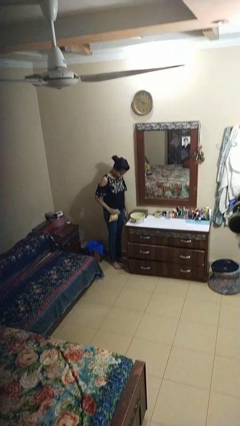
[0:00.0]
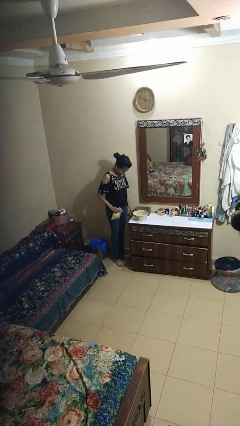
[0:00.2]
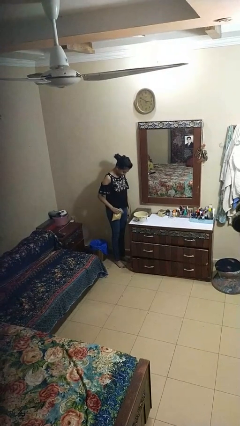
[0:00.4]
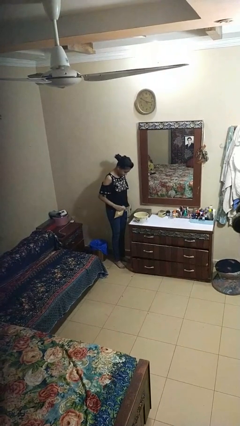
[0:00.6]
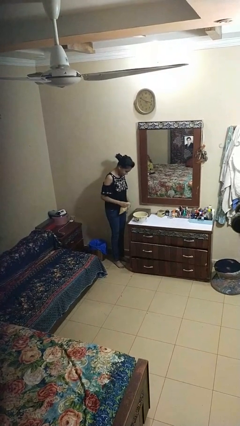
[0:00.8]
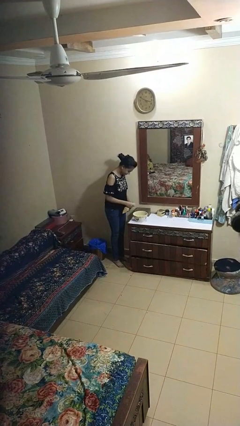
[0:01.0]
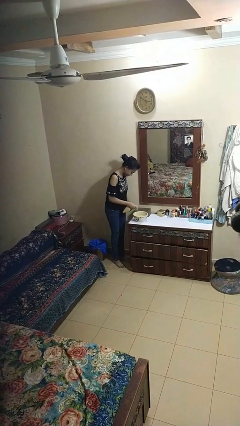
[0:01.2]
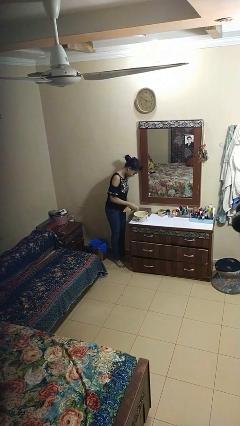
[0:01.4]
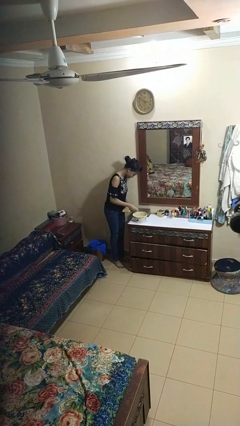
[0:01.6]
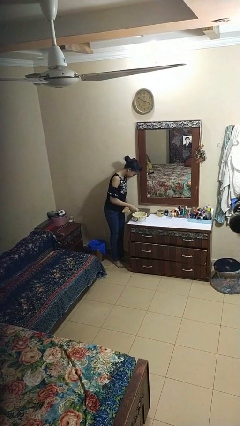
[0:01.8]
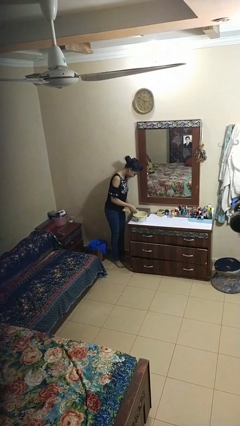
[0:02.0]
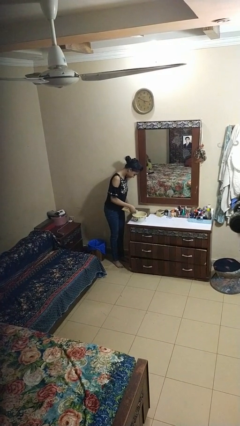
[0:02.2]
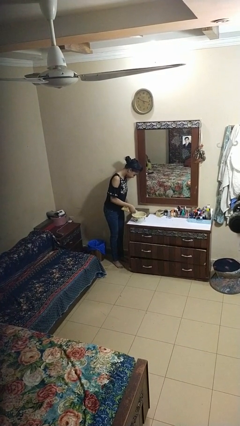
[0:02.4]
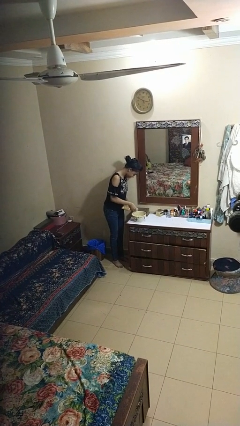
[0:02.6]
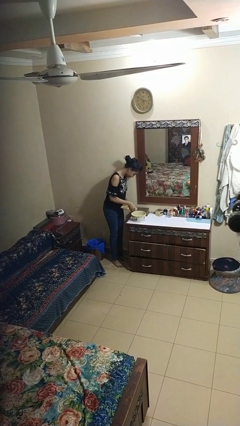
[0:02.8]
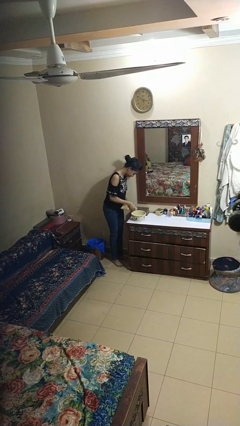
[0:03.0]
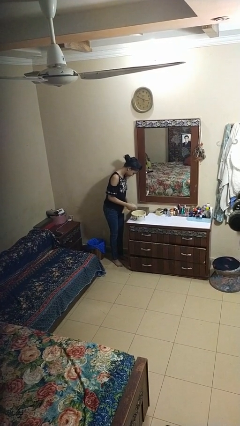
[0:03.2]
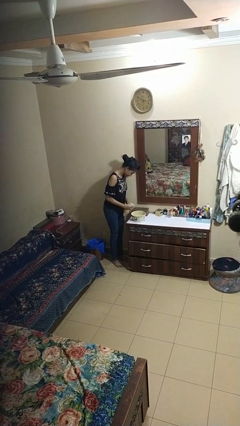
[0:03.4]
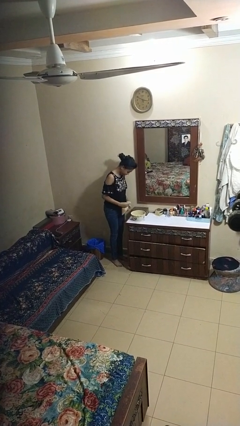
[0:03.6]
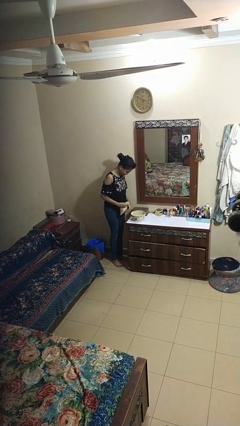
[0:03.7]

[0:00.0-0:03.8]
person pours into bowl

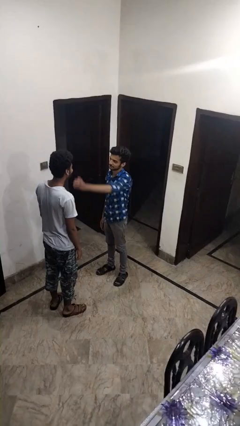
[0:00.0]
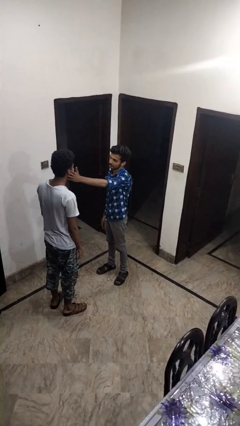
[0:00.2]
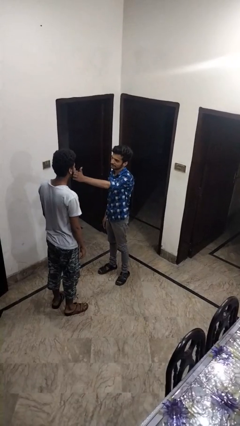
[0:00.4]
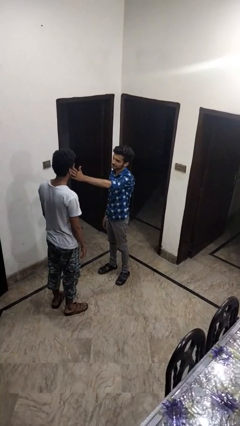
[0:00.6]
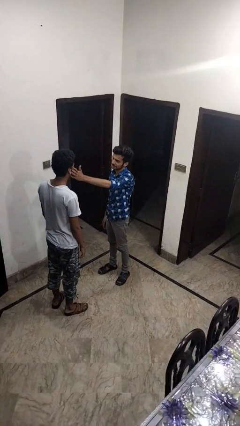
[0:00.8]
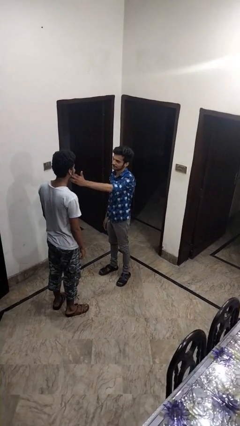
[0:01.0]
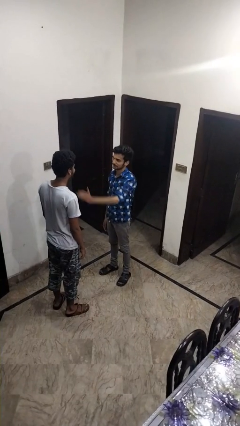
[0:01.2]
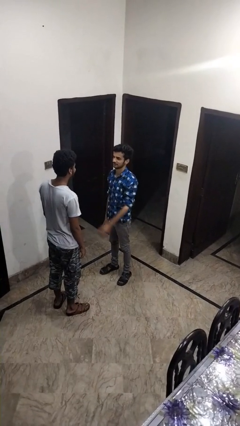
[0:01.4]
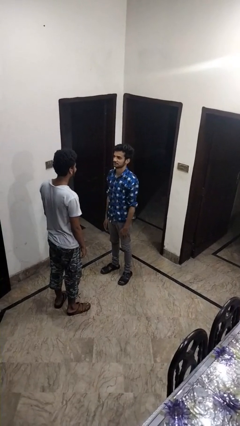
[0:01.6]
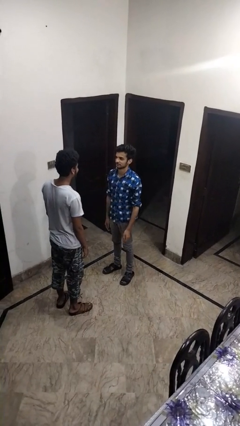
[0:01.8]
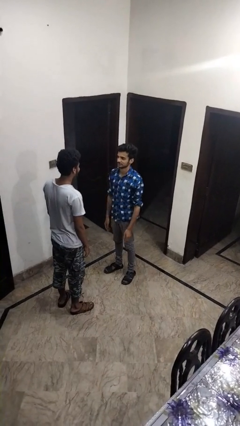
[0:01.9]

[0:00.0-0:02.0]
person touches face of person

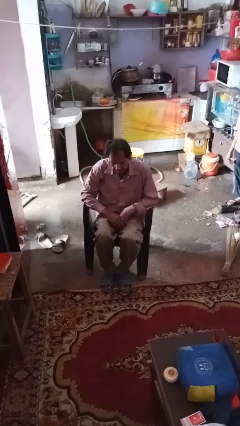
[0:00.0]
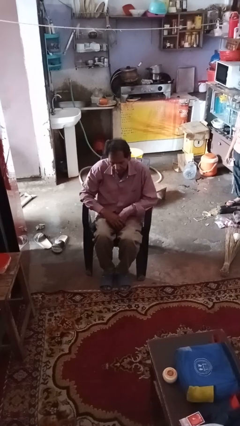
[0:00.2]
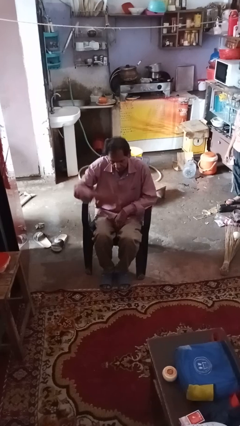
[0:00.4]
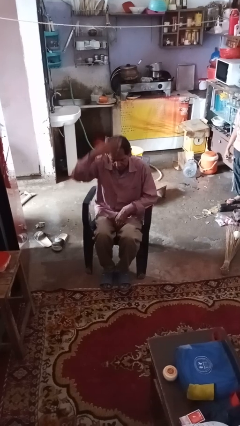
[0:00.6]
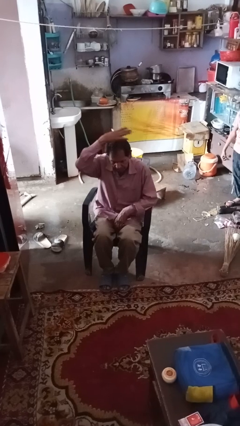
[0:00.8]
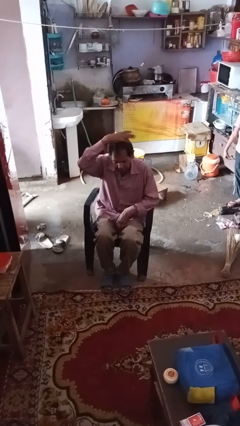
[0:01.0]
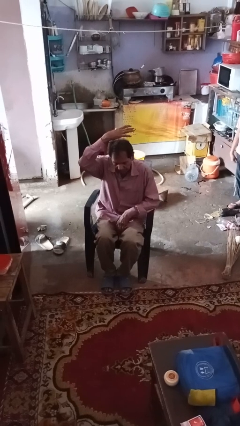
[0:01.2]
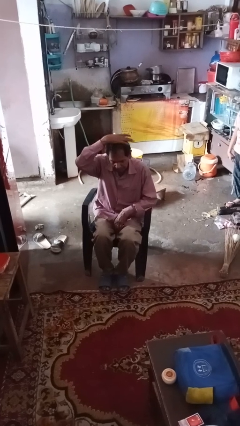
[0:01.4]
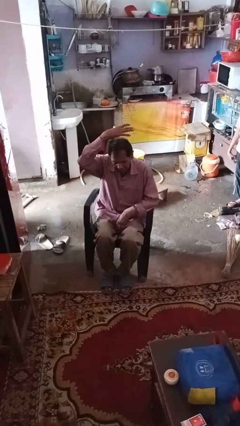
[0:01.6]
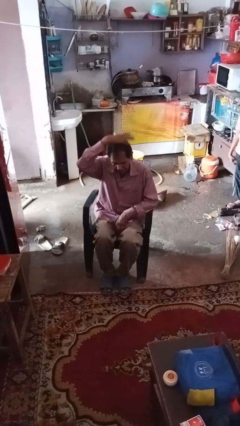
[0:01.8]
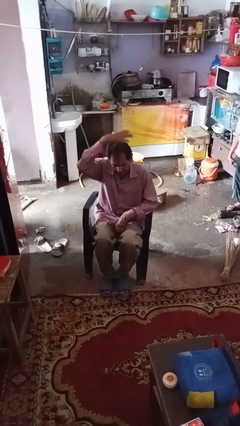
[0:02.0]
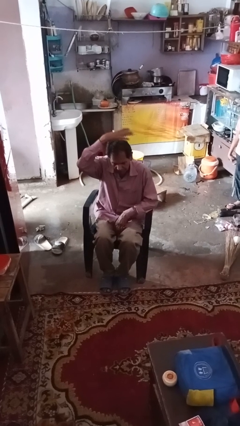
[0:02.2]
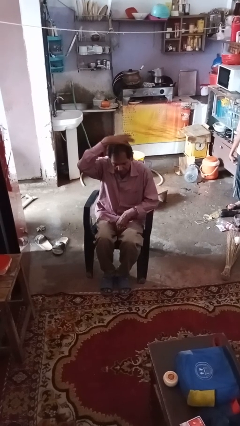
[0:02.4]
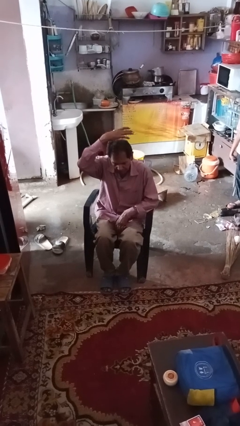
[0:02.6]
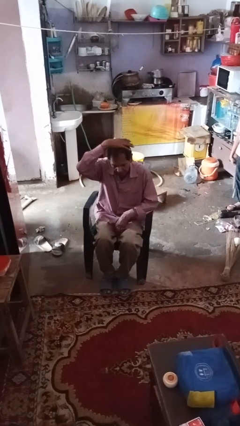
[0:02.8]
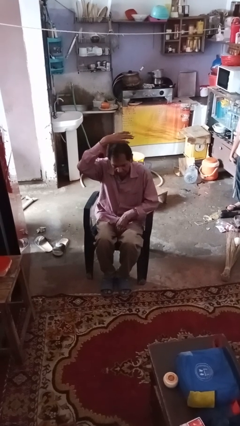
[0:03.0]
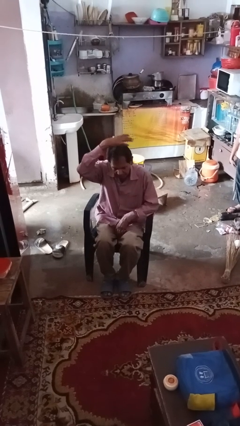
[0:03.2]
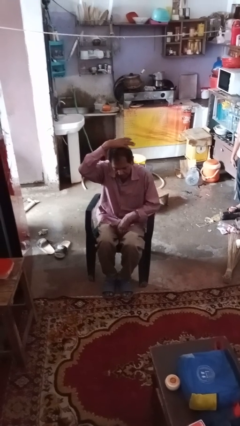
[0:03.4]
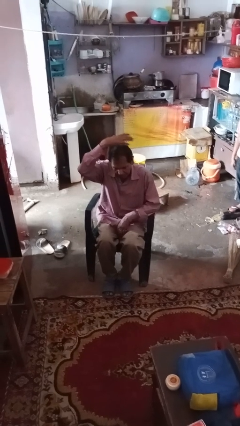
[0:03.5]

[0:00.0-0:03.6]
person pats head

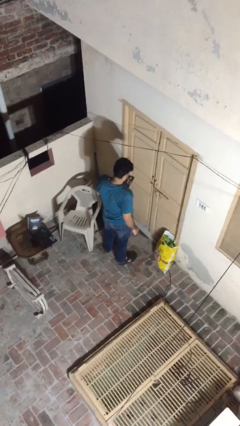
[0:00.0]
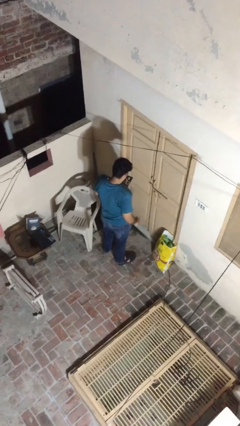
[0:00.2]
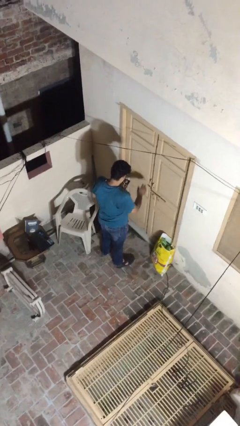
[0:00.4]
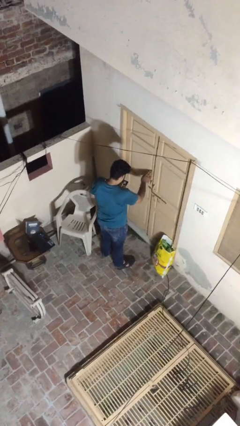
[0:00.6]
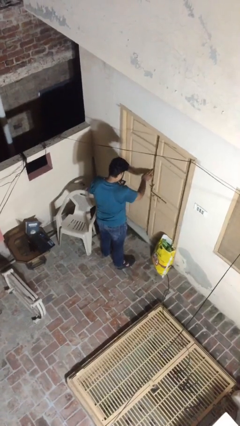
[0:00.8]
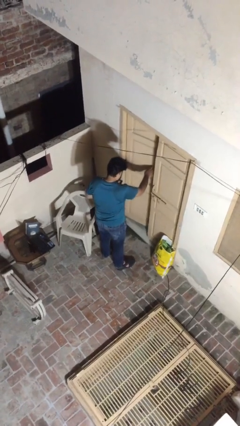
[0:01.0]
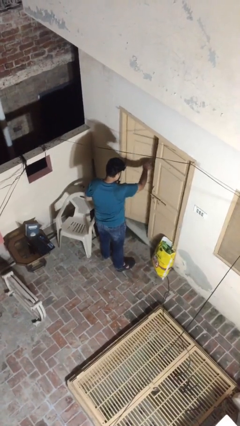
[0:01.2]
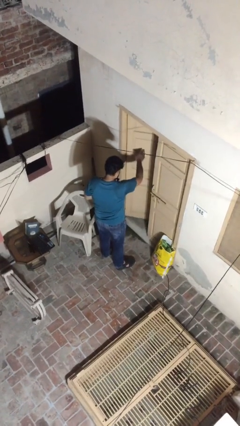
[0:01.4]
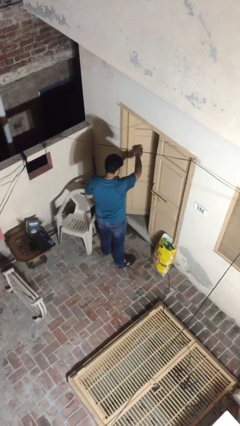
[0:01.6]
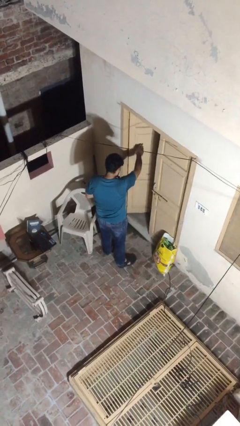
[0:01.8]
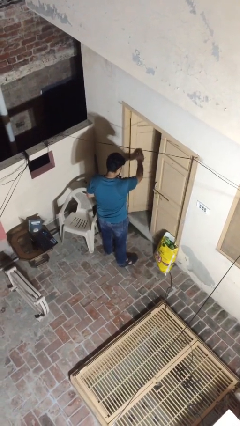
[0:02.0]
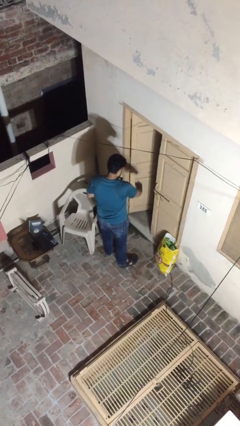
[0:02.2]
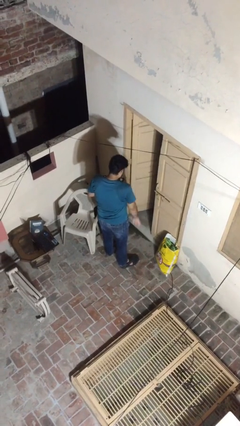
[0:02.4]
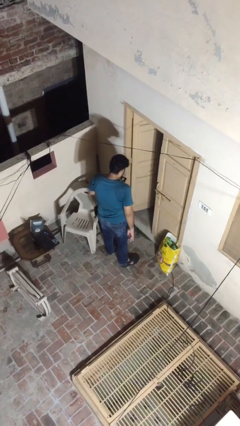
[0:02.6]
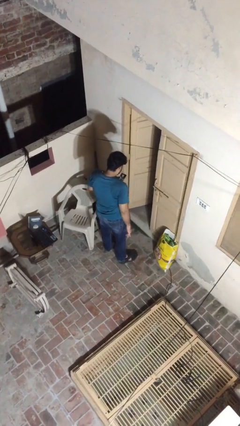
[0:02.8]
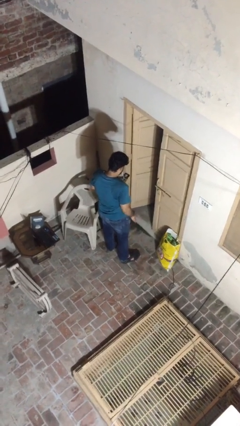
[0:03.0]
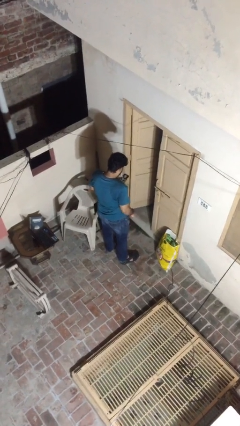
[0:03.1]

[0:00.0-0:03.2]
person opens facility door

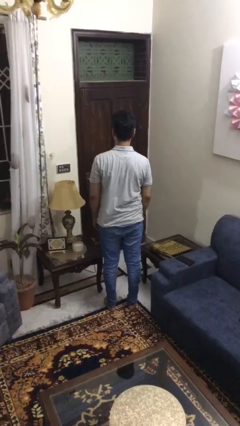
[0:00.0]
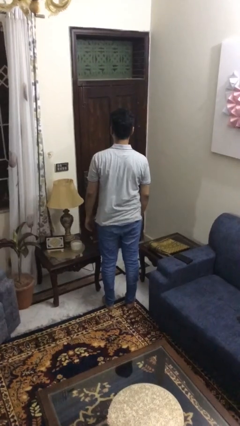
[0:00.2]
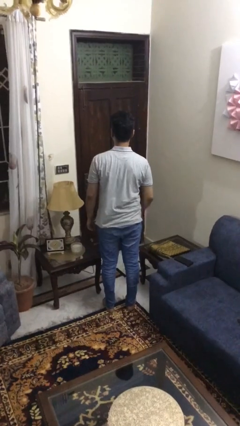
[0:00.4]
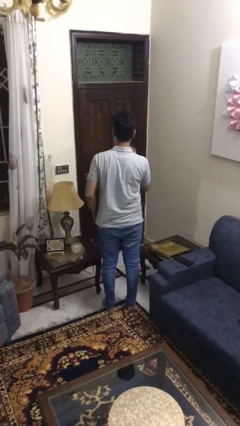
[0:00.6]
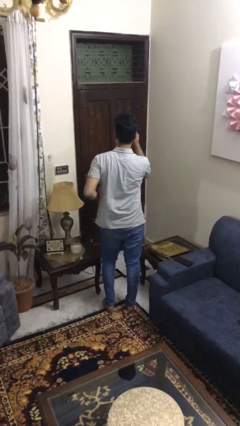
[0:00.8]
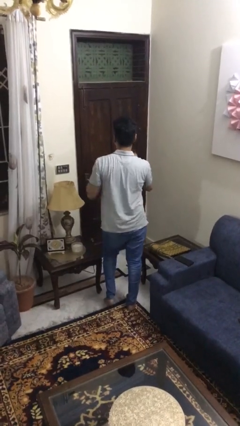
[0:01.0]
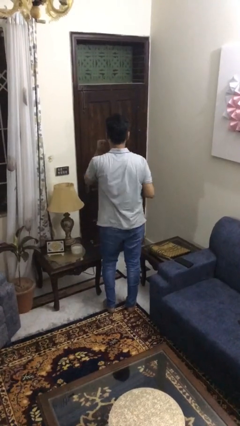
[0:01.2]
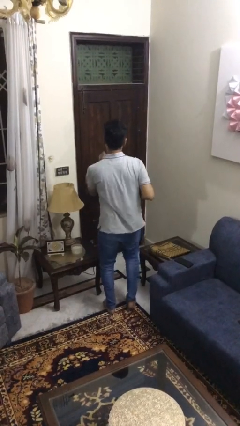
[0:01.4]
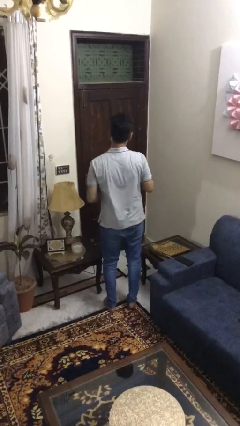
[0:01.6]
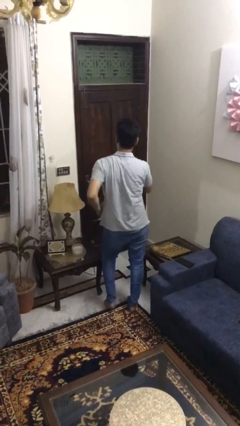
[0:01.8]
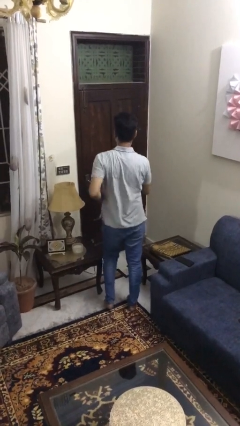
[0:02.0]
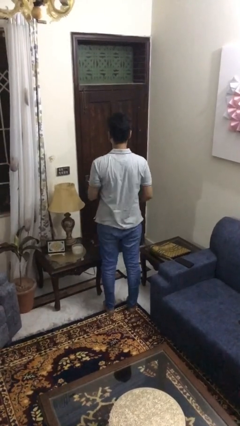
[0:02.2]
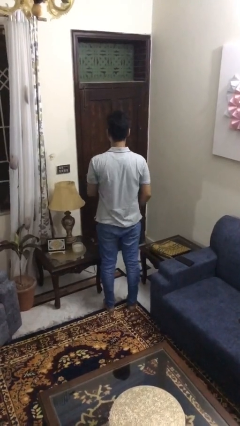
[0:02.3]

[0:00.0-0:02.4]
person dances in place

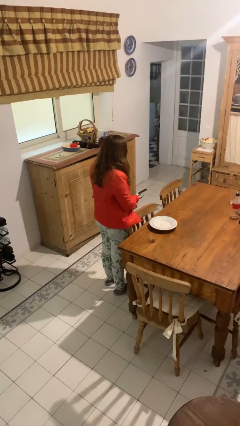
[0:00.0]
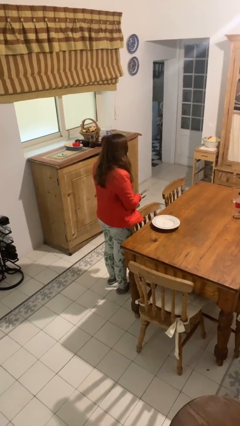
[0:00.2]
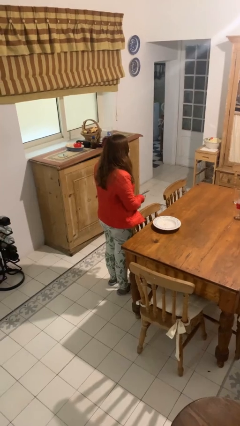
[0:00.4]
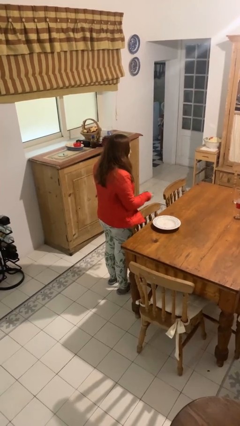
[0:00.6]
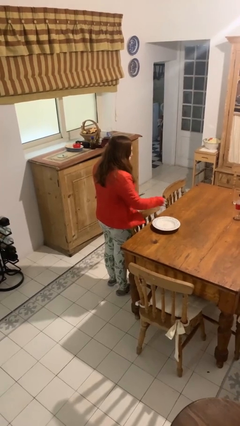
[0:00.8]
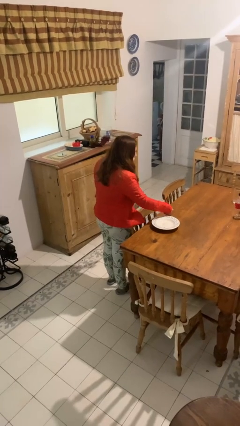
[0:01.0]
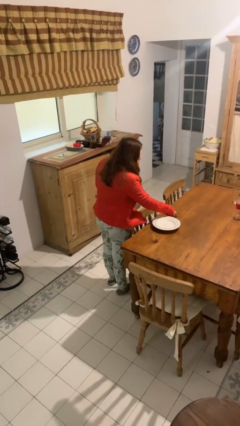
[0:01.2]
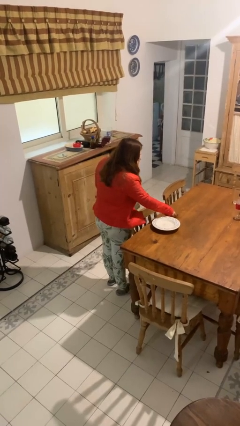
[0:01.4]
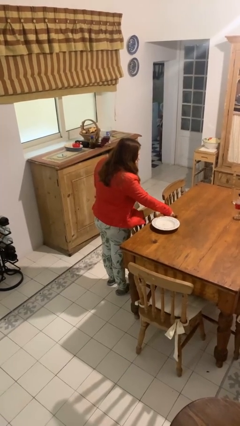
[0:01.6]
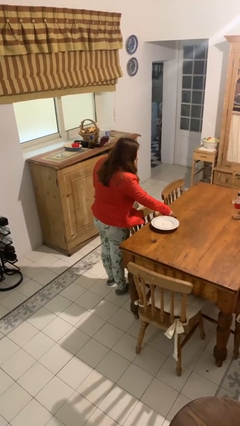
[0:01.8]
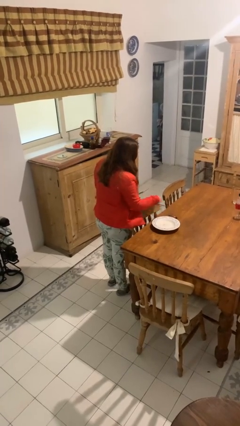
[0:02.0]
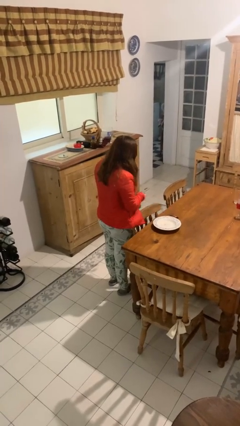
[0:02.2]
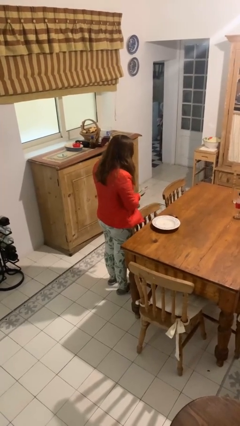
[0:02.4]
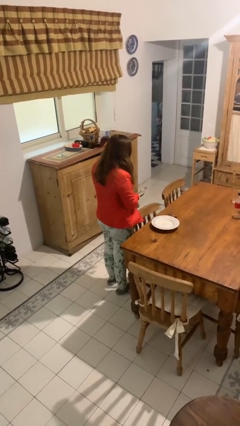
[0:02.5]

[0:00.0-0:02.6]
person sets table

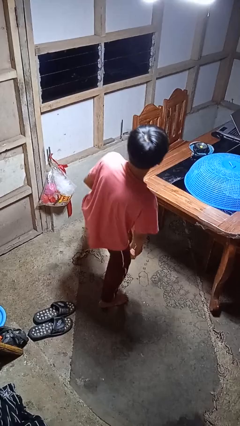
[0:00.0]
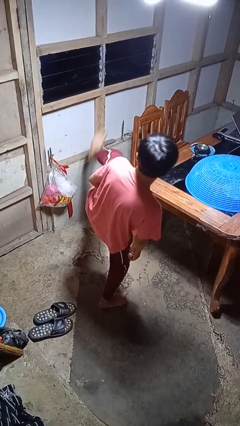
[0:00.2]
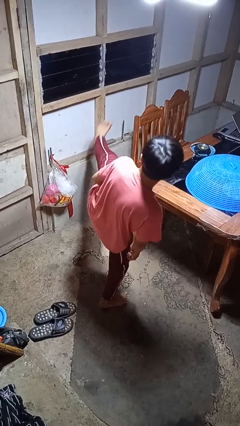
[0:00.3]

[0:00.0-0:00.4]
person karate kicks
